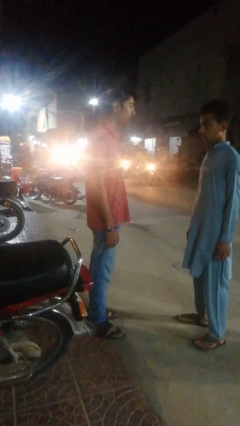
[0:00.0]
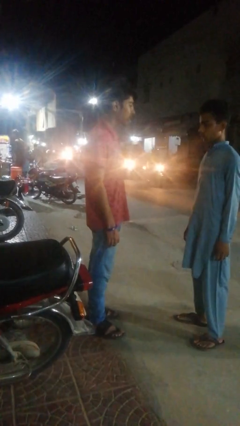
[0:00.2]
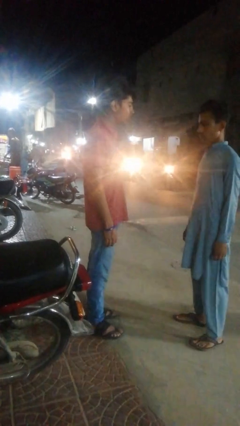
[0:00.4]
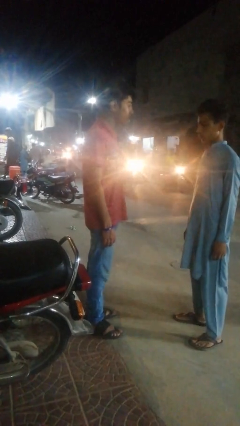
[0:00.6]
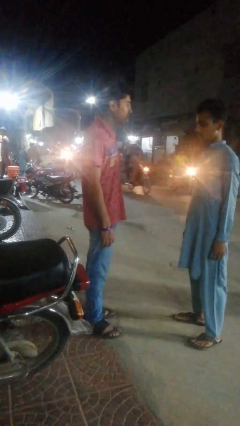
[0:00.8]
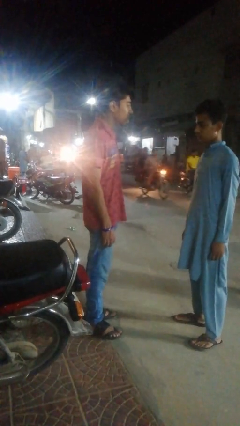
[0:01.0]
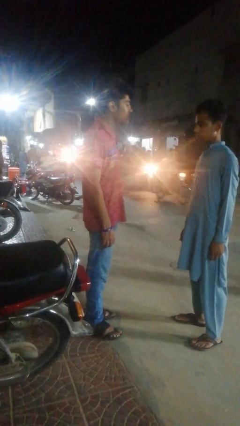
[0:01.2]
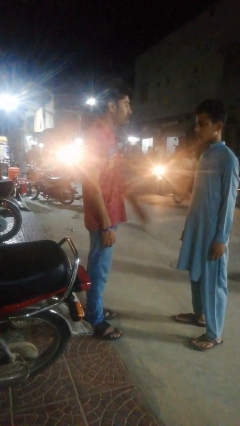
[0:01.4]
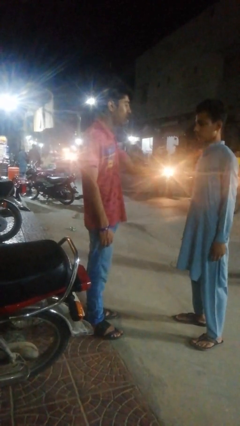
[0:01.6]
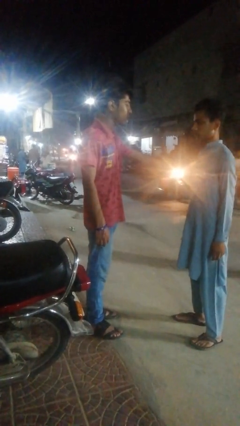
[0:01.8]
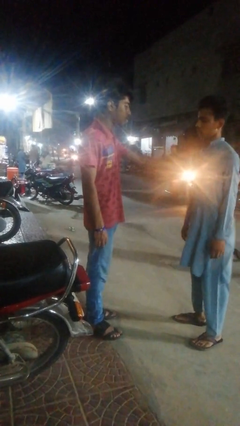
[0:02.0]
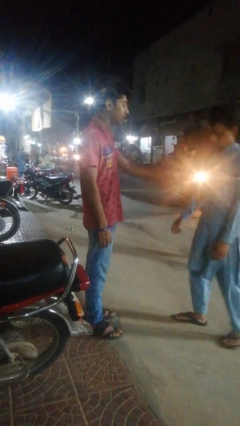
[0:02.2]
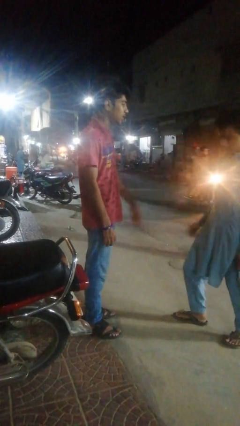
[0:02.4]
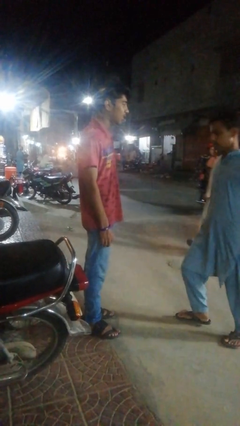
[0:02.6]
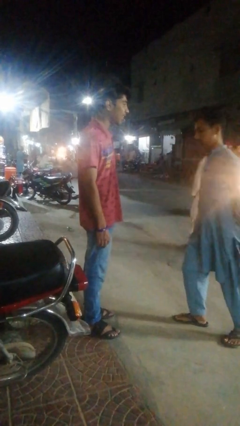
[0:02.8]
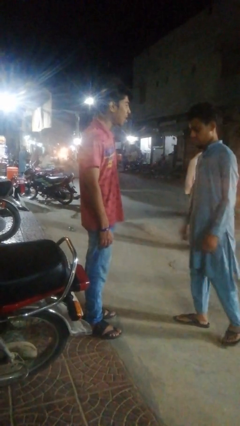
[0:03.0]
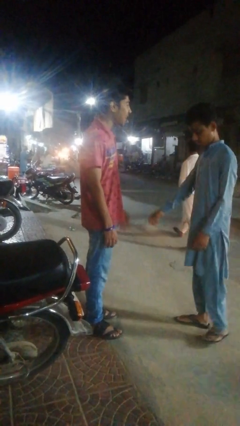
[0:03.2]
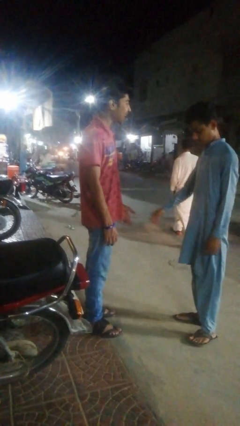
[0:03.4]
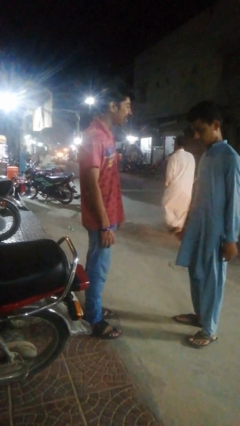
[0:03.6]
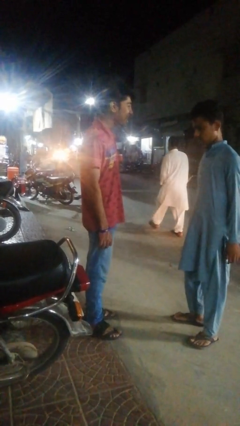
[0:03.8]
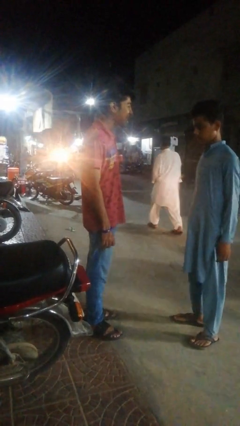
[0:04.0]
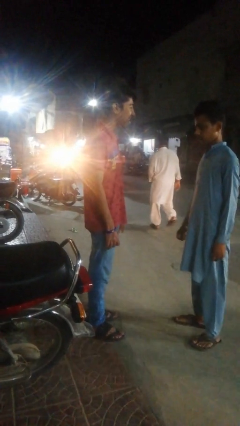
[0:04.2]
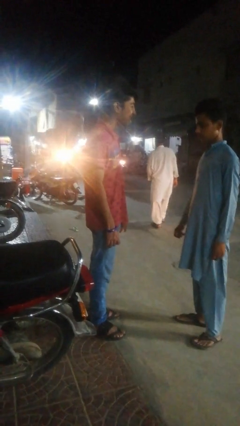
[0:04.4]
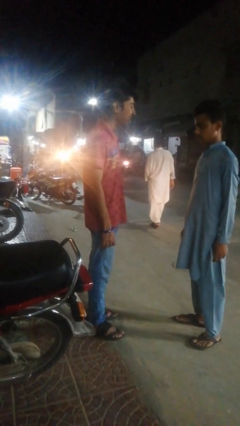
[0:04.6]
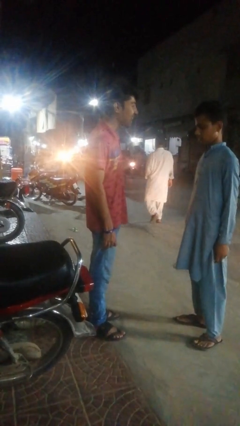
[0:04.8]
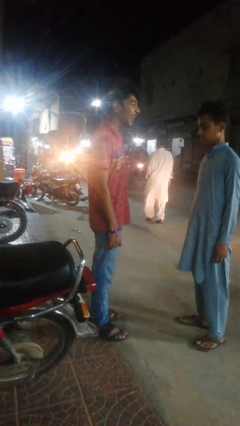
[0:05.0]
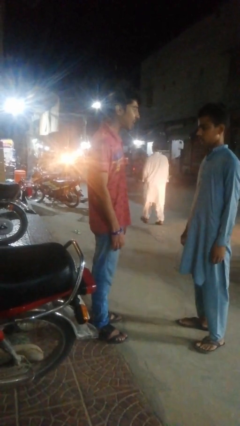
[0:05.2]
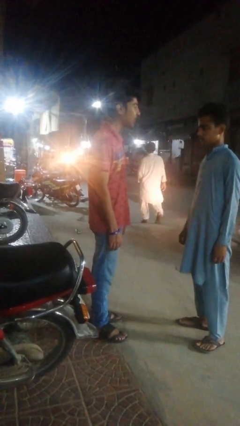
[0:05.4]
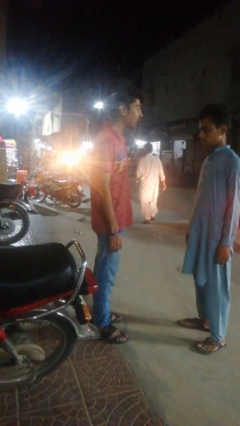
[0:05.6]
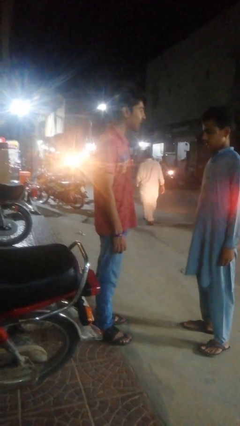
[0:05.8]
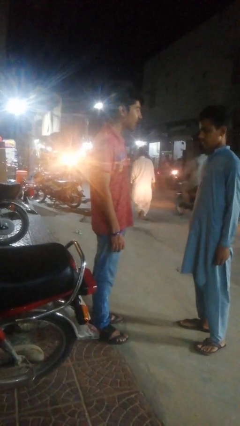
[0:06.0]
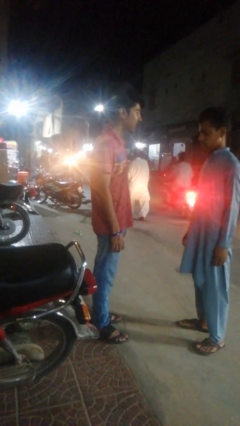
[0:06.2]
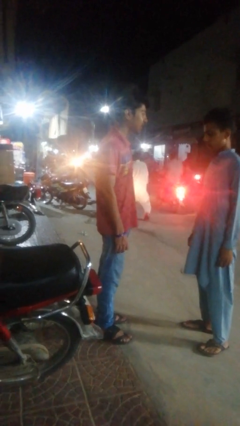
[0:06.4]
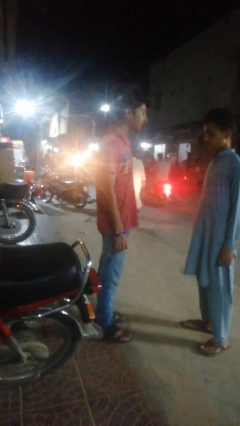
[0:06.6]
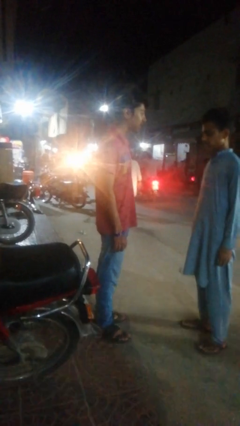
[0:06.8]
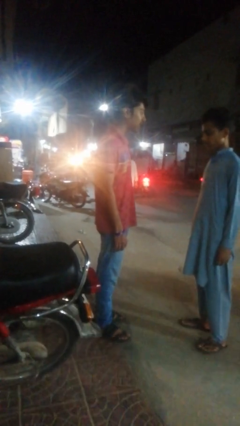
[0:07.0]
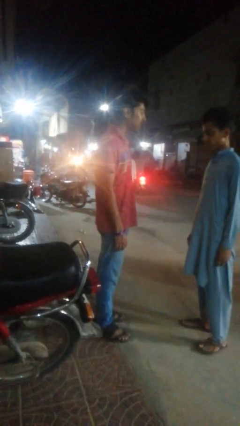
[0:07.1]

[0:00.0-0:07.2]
person shoves person

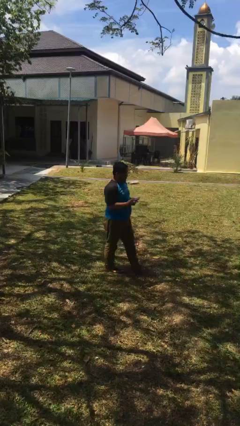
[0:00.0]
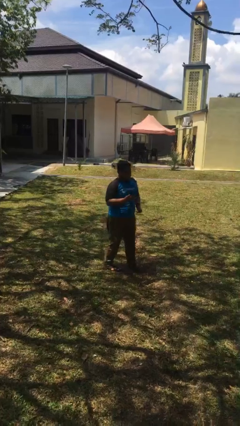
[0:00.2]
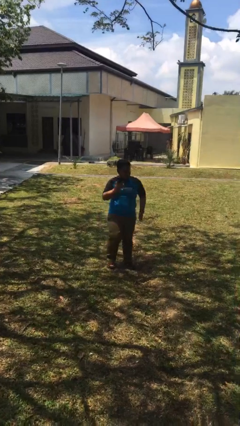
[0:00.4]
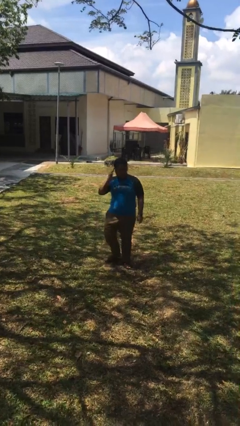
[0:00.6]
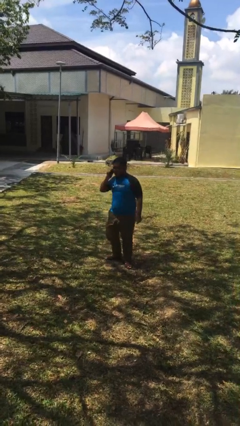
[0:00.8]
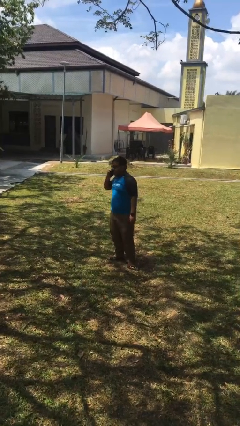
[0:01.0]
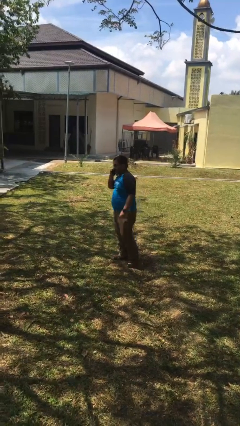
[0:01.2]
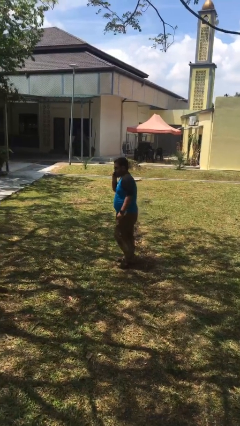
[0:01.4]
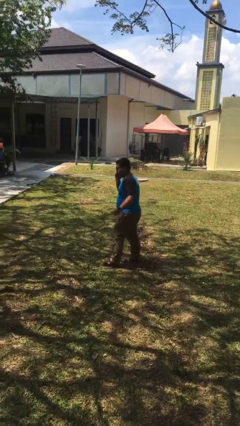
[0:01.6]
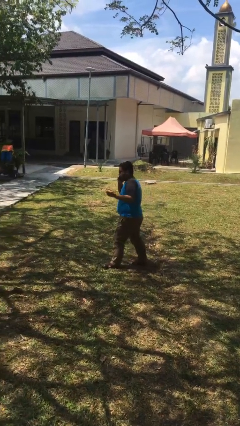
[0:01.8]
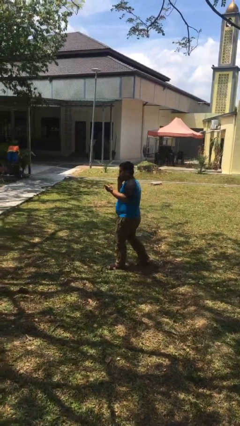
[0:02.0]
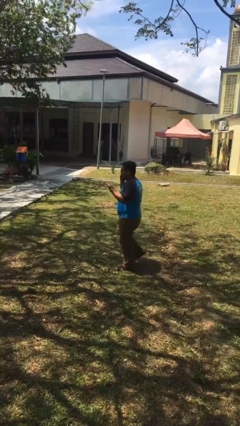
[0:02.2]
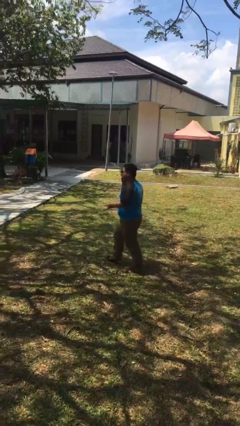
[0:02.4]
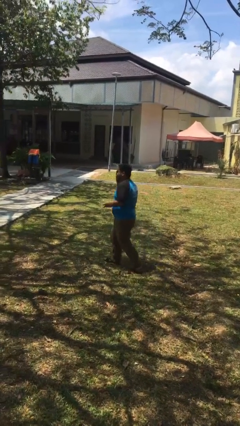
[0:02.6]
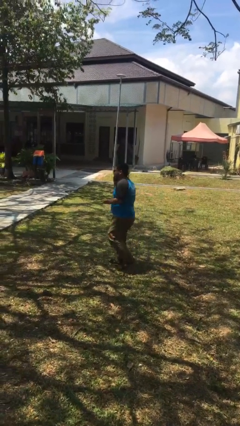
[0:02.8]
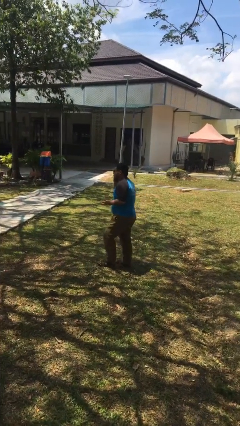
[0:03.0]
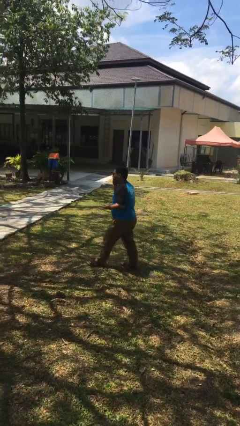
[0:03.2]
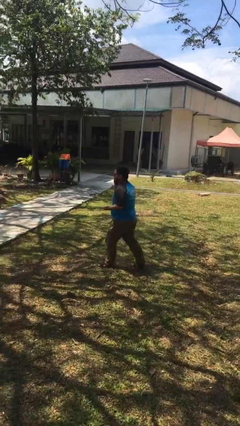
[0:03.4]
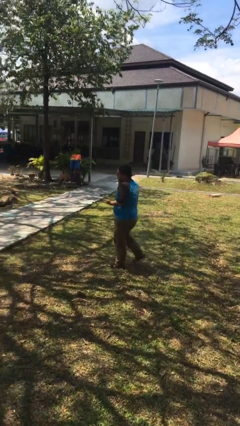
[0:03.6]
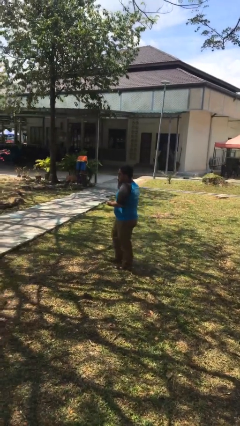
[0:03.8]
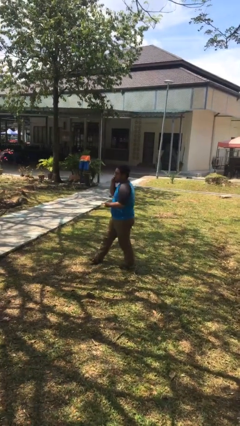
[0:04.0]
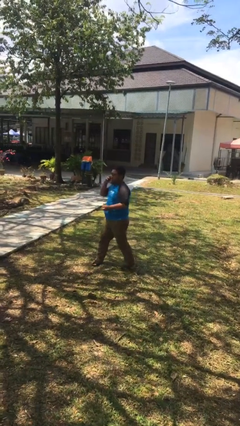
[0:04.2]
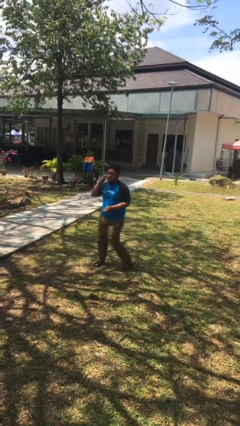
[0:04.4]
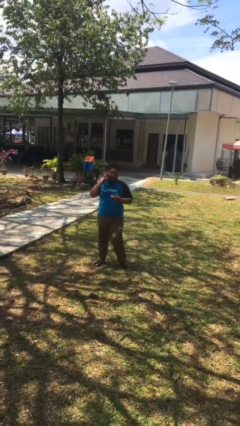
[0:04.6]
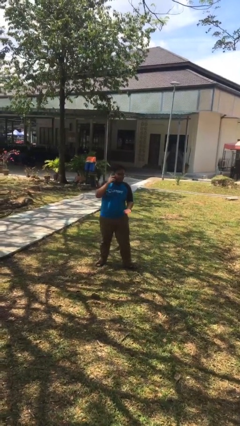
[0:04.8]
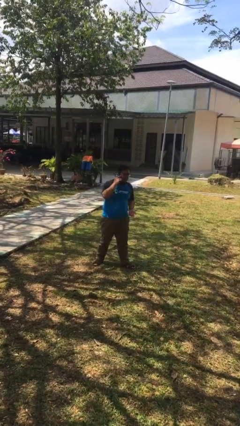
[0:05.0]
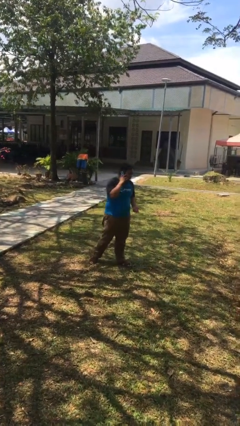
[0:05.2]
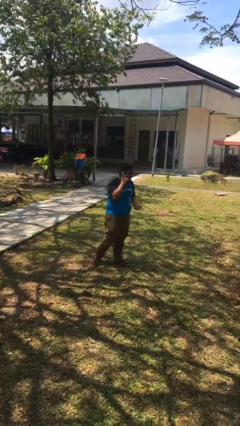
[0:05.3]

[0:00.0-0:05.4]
person talks on phone

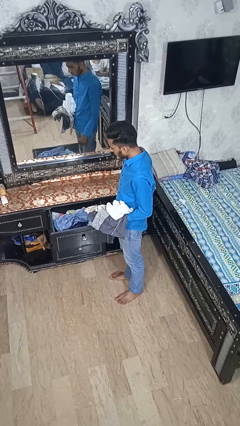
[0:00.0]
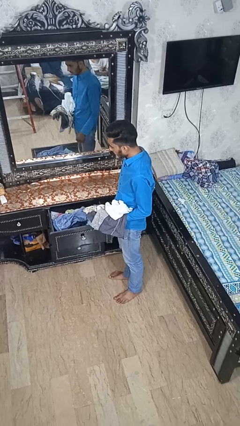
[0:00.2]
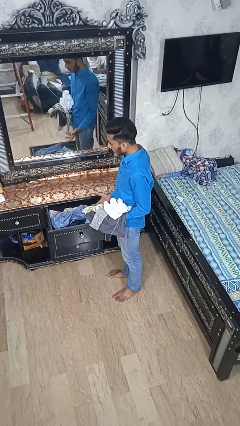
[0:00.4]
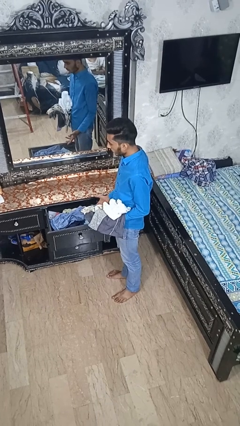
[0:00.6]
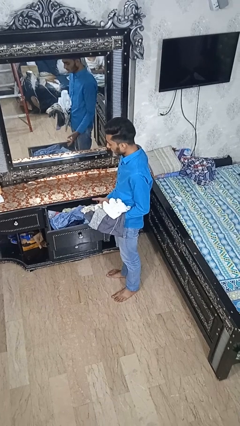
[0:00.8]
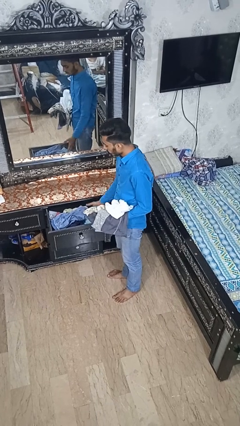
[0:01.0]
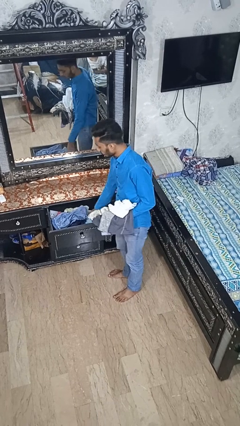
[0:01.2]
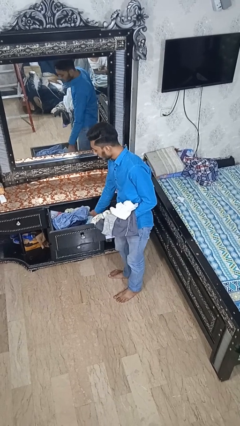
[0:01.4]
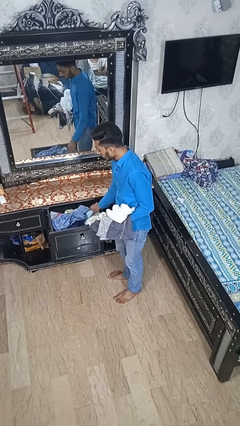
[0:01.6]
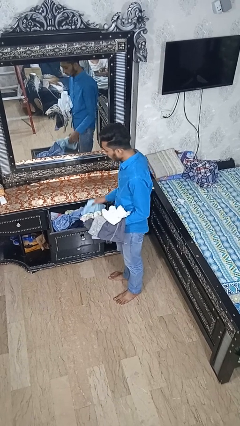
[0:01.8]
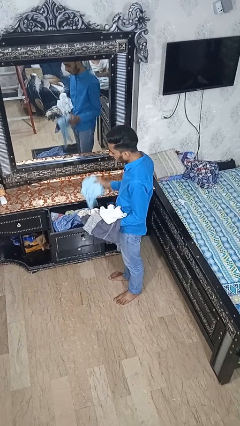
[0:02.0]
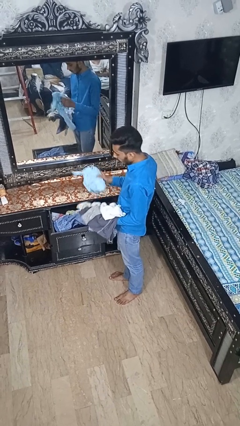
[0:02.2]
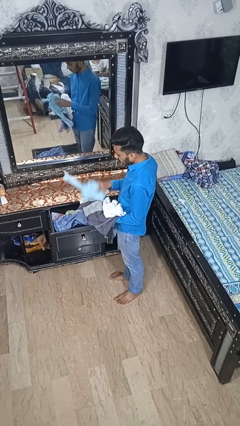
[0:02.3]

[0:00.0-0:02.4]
person takes clothes from dresser

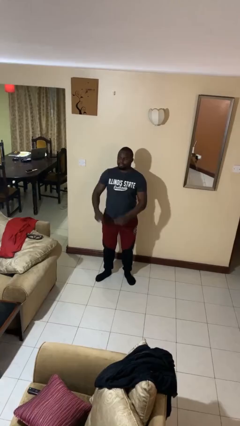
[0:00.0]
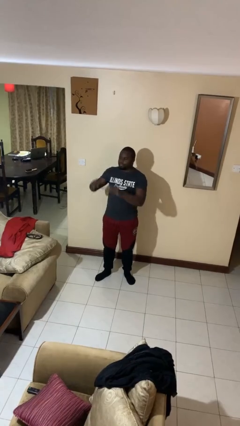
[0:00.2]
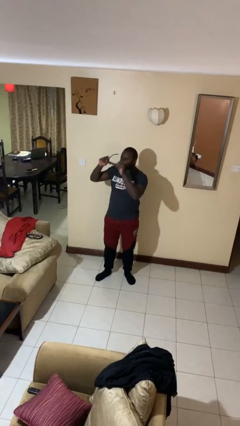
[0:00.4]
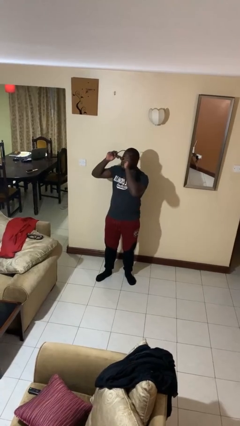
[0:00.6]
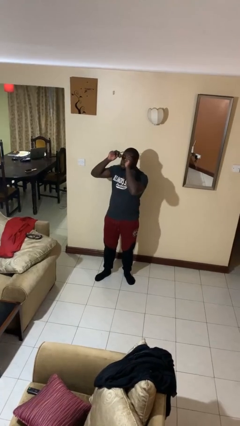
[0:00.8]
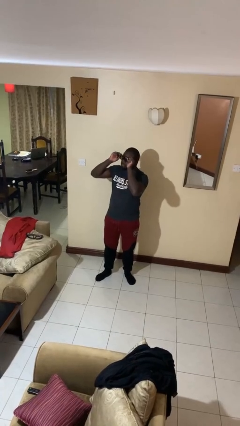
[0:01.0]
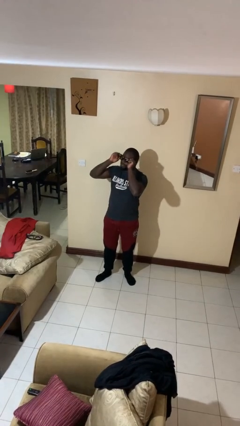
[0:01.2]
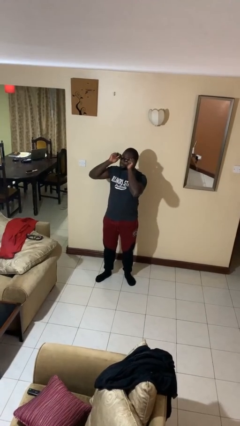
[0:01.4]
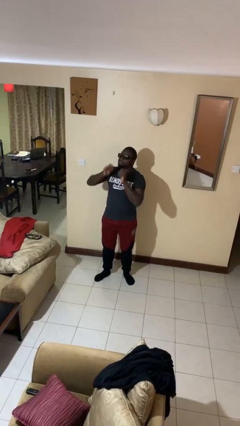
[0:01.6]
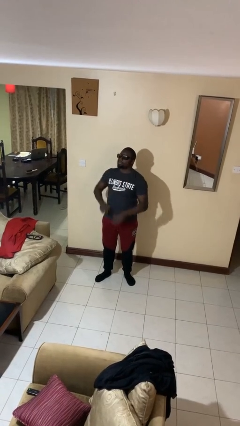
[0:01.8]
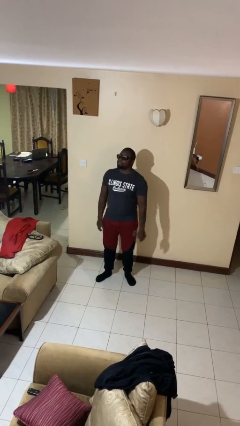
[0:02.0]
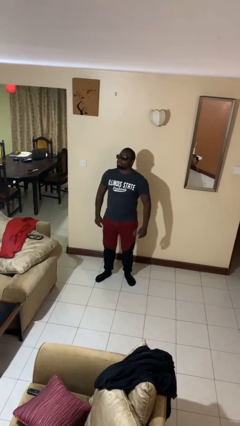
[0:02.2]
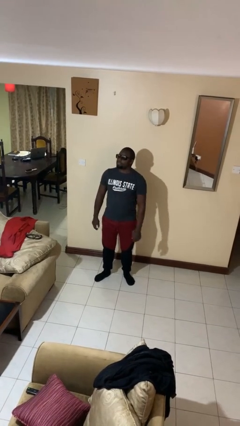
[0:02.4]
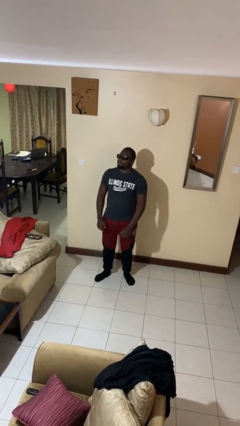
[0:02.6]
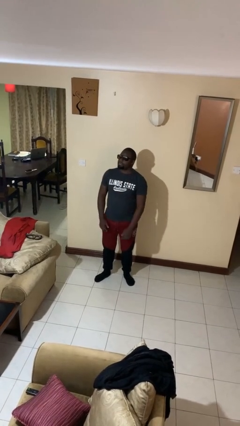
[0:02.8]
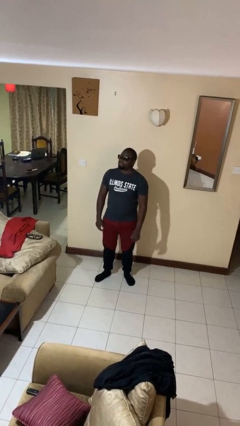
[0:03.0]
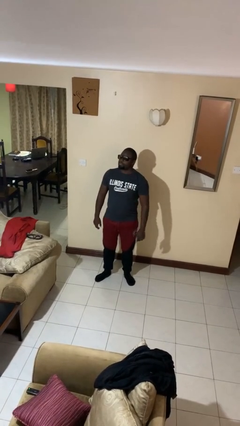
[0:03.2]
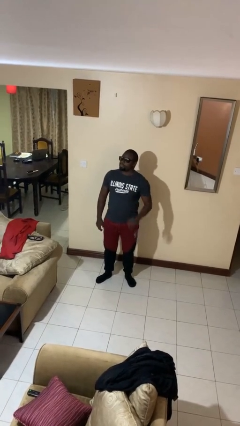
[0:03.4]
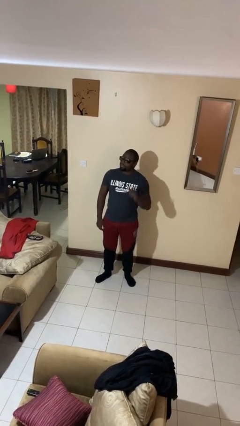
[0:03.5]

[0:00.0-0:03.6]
person puts on sunglasses
